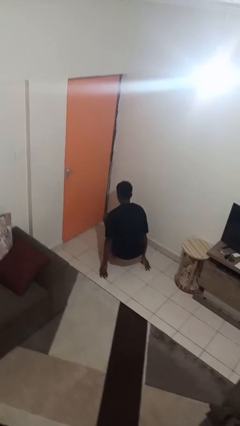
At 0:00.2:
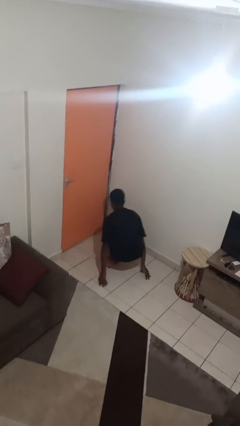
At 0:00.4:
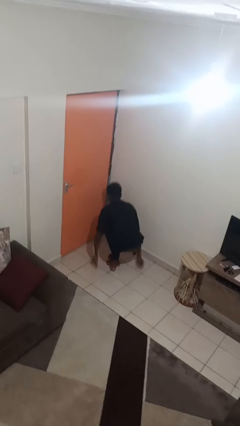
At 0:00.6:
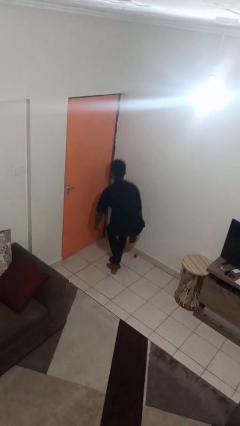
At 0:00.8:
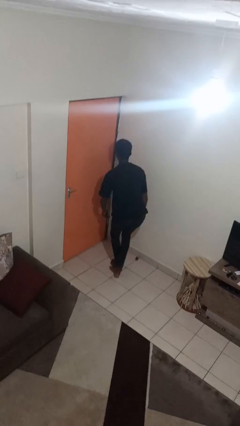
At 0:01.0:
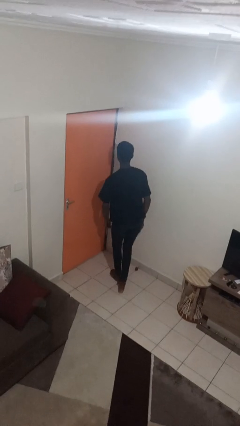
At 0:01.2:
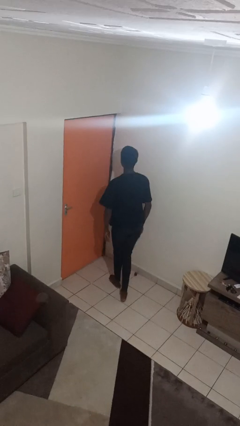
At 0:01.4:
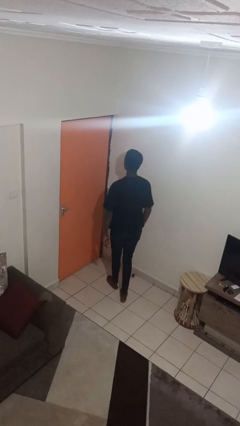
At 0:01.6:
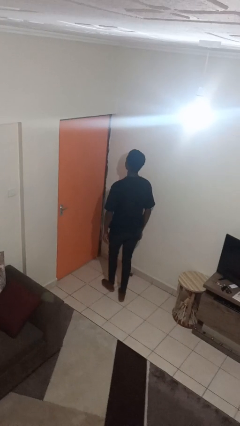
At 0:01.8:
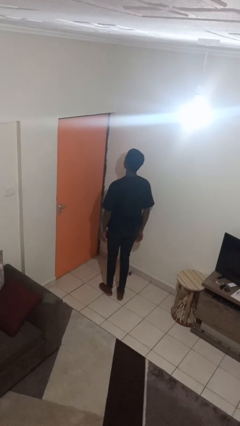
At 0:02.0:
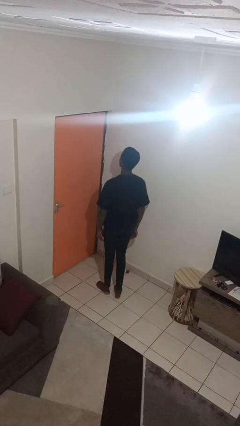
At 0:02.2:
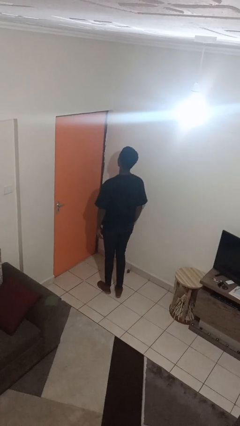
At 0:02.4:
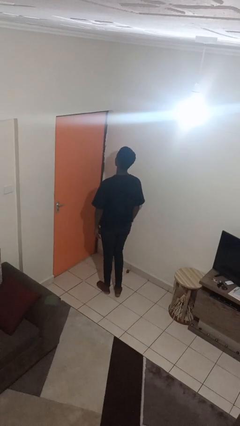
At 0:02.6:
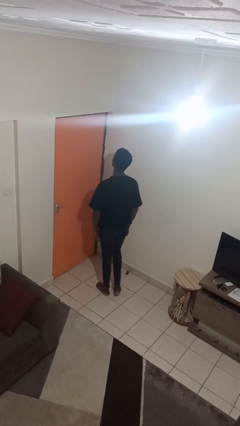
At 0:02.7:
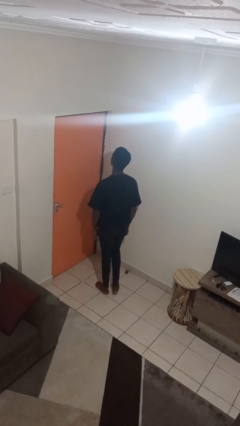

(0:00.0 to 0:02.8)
person stands up from floor

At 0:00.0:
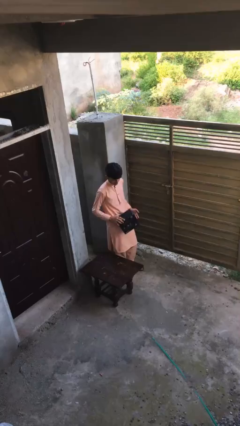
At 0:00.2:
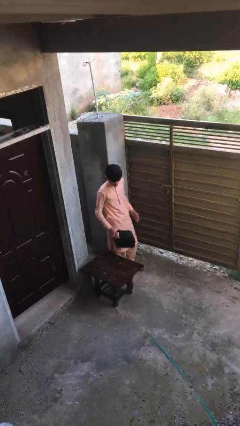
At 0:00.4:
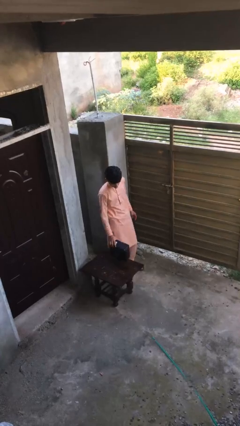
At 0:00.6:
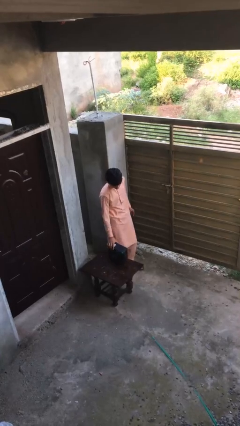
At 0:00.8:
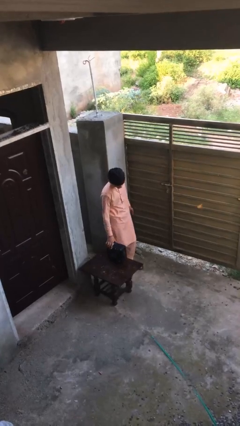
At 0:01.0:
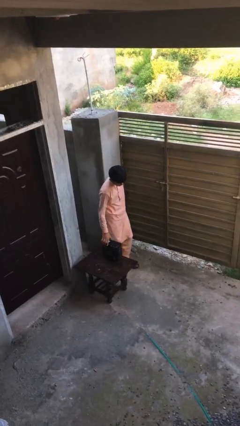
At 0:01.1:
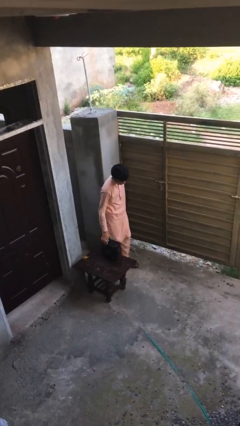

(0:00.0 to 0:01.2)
person puts down object on table

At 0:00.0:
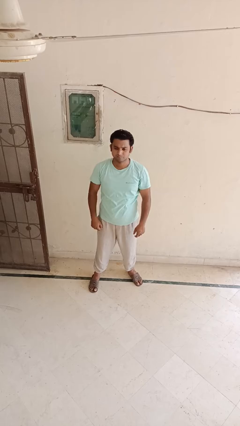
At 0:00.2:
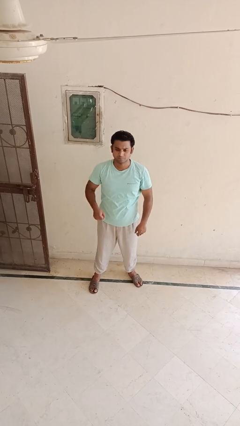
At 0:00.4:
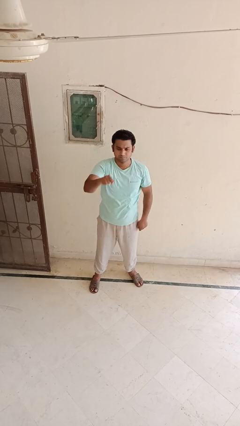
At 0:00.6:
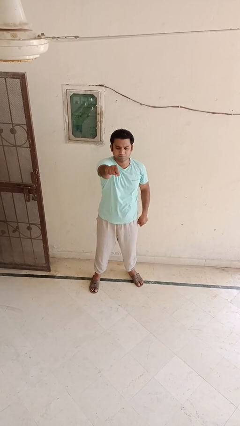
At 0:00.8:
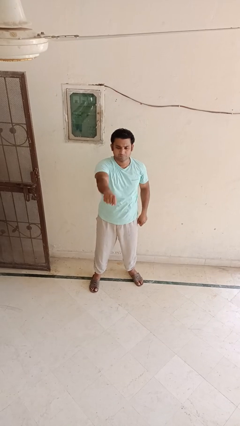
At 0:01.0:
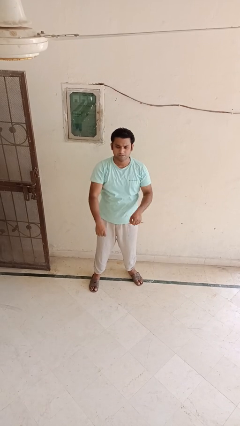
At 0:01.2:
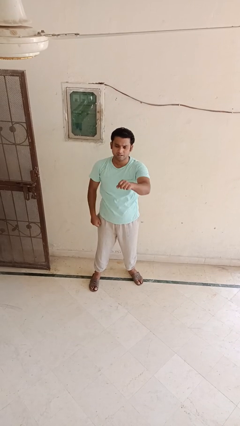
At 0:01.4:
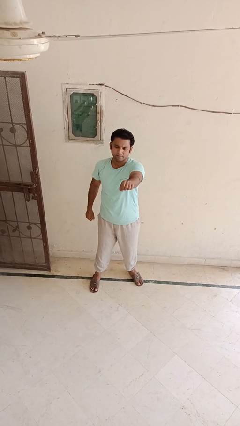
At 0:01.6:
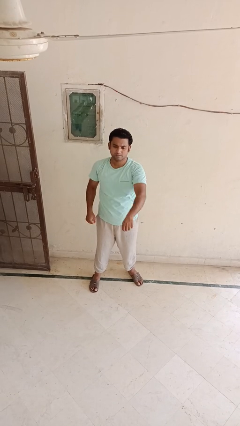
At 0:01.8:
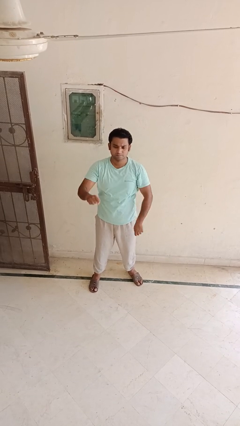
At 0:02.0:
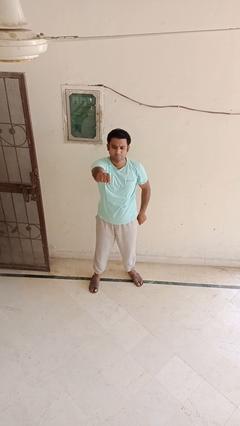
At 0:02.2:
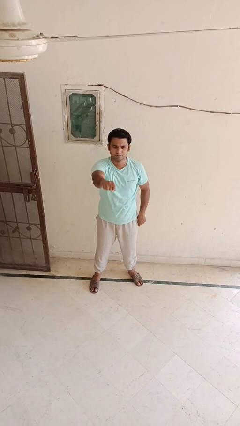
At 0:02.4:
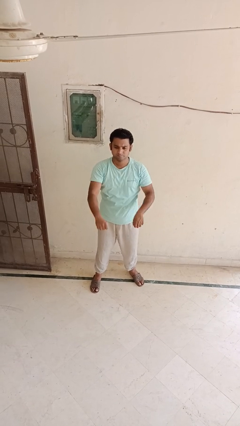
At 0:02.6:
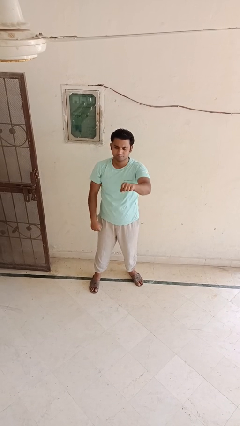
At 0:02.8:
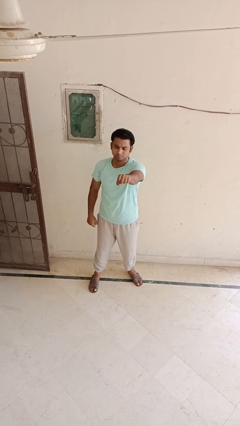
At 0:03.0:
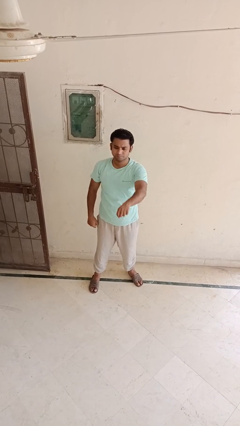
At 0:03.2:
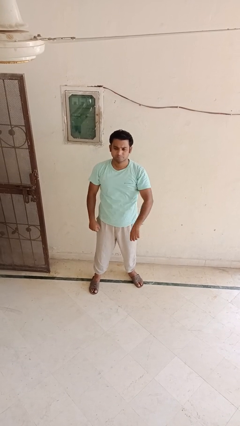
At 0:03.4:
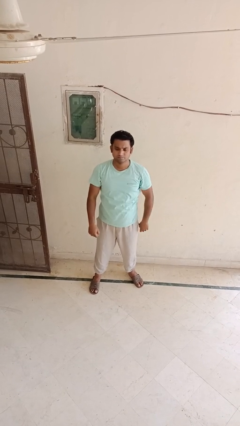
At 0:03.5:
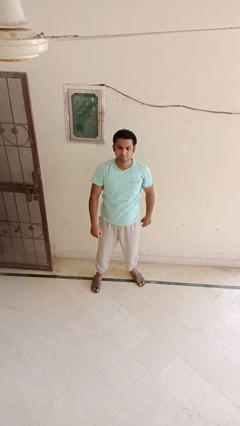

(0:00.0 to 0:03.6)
person punches

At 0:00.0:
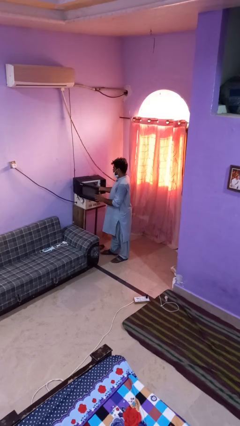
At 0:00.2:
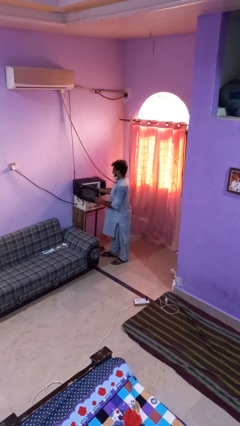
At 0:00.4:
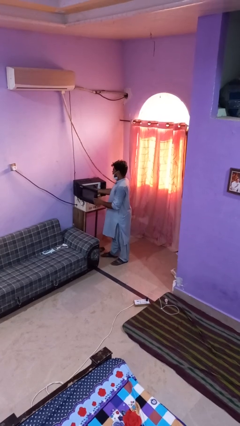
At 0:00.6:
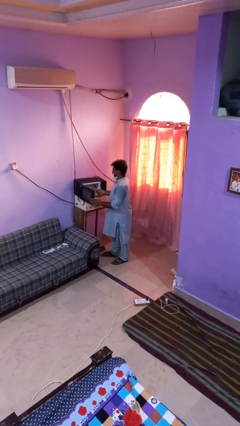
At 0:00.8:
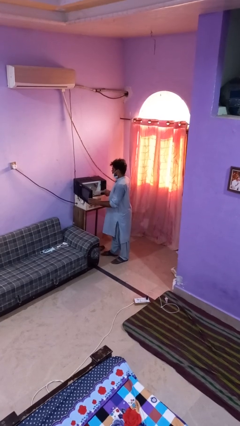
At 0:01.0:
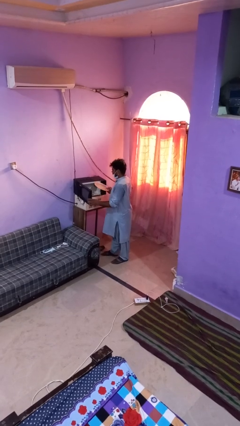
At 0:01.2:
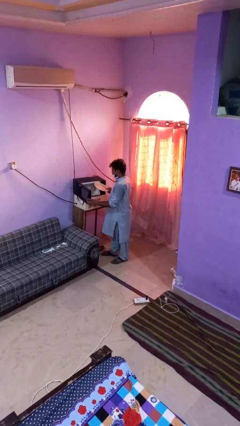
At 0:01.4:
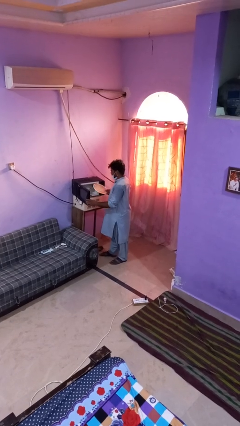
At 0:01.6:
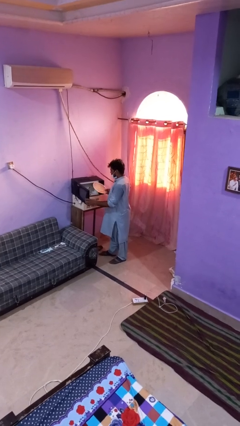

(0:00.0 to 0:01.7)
person takes object from oven

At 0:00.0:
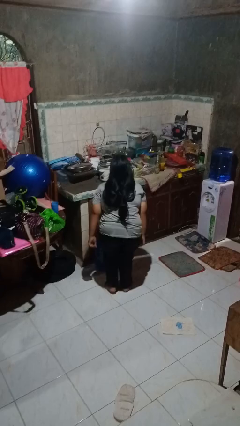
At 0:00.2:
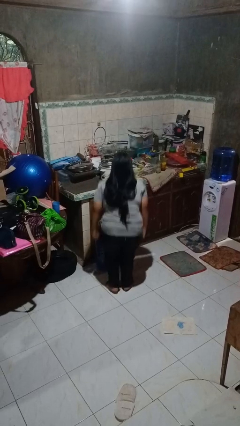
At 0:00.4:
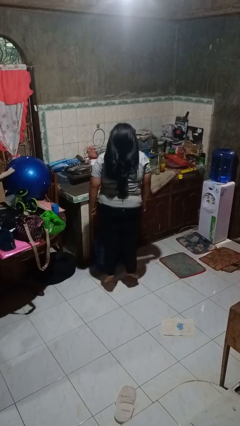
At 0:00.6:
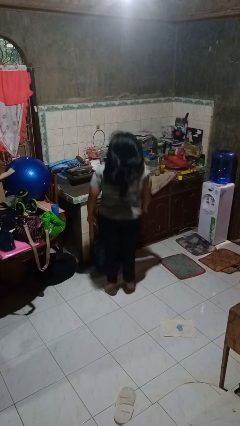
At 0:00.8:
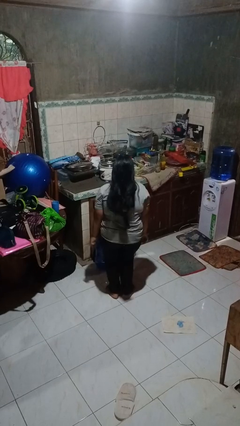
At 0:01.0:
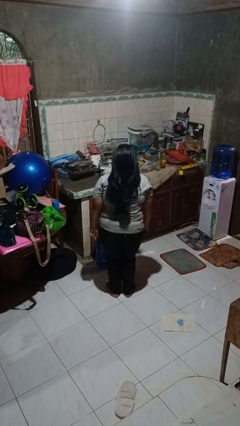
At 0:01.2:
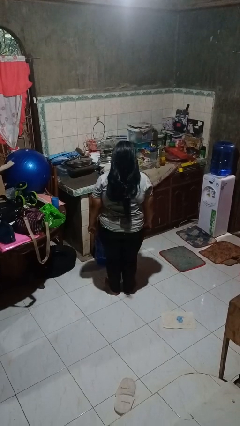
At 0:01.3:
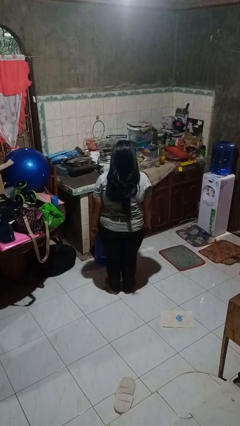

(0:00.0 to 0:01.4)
person jumps

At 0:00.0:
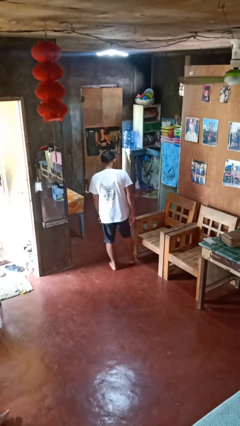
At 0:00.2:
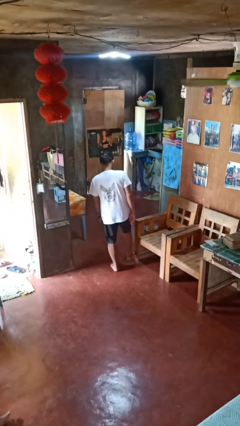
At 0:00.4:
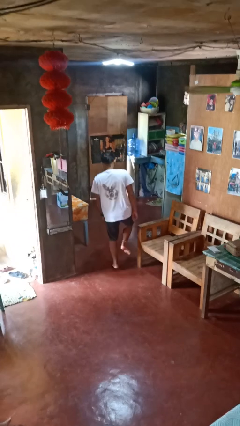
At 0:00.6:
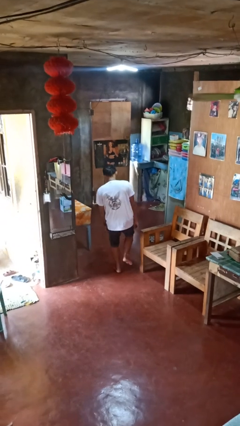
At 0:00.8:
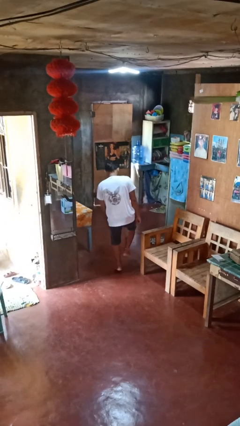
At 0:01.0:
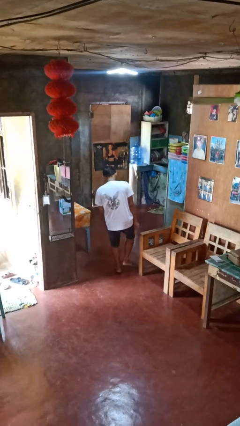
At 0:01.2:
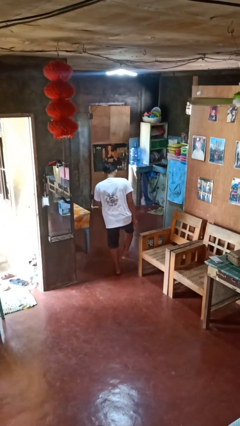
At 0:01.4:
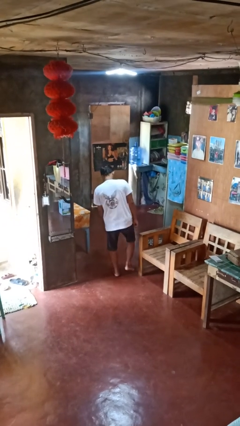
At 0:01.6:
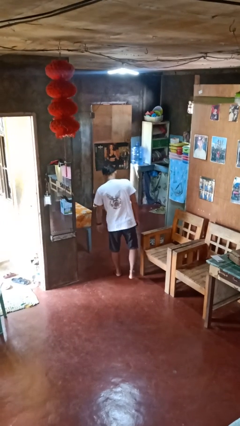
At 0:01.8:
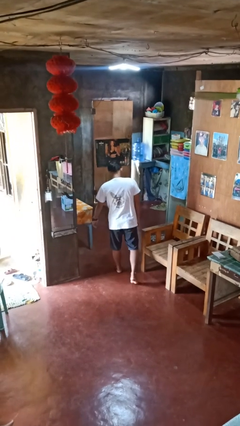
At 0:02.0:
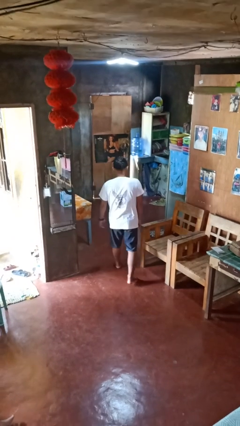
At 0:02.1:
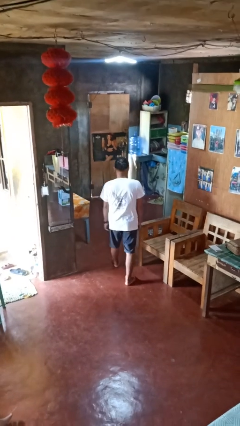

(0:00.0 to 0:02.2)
person stubs toe

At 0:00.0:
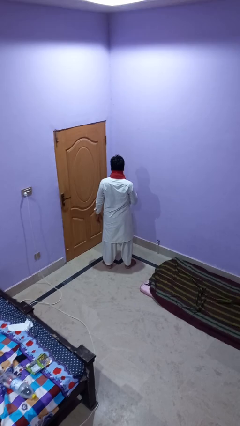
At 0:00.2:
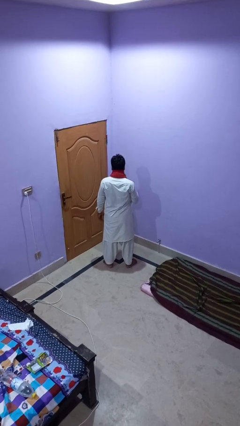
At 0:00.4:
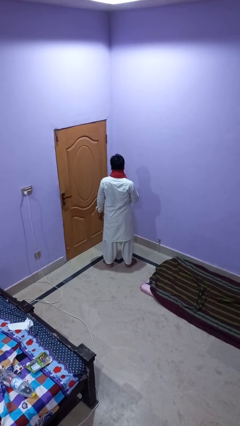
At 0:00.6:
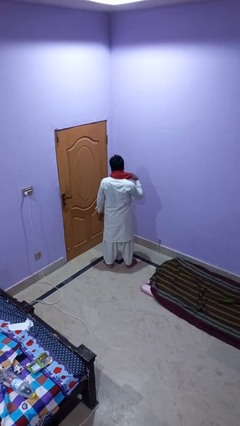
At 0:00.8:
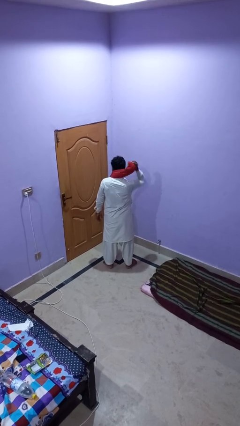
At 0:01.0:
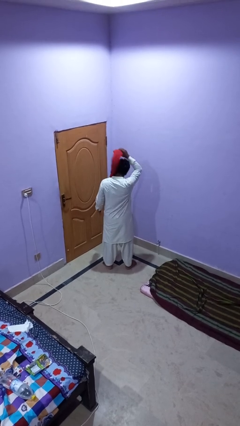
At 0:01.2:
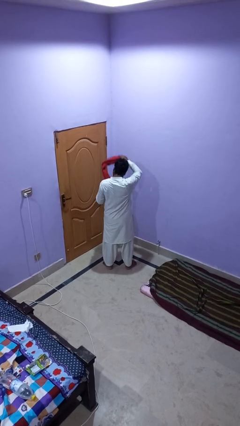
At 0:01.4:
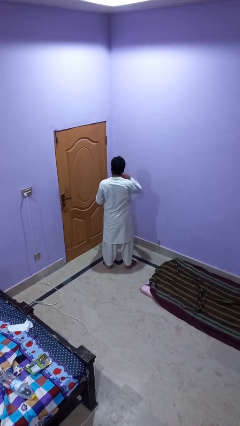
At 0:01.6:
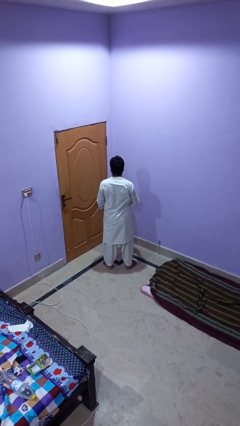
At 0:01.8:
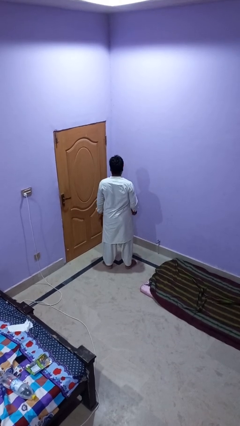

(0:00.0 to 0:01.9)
person takes off scarf

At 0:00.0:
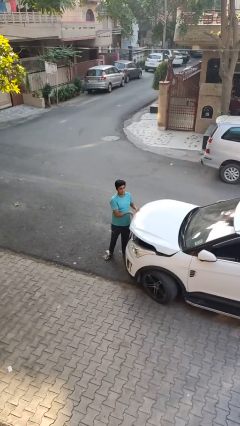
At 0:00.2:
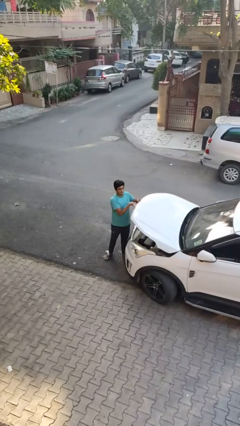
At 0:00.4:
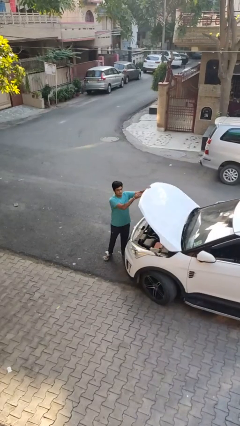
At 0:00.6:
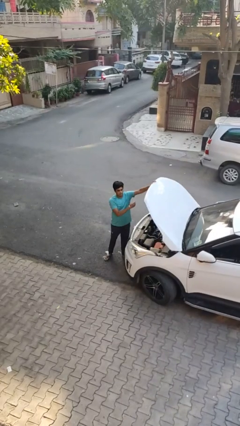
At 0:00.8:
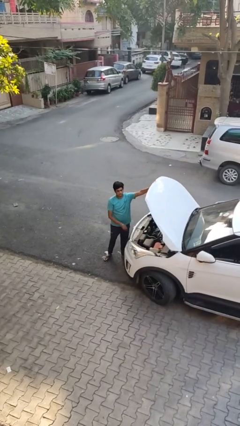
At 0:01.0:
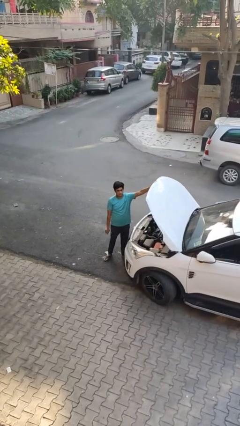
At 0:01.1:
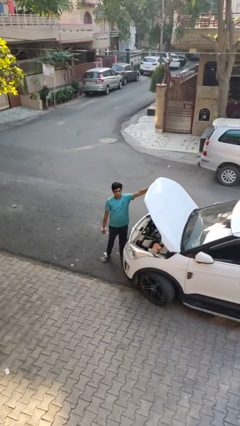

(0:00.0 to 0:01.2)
person opens car hood

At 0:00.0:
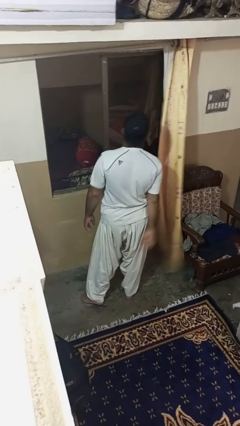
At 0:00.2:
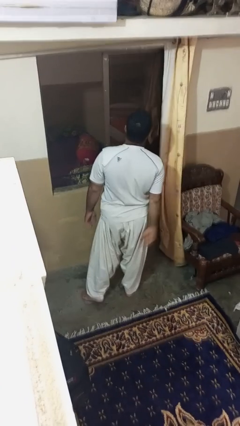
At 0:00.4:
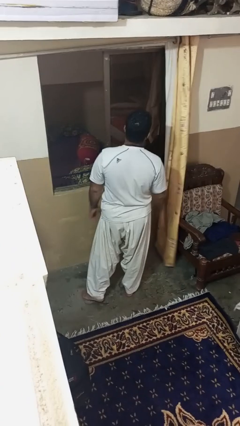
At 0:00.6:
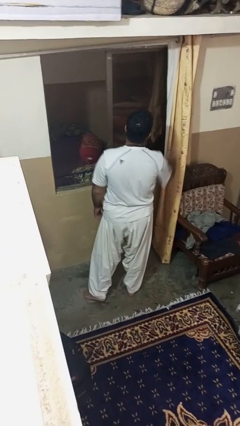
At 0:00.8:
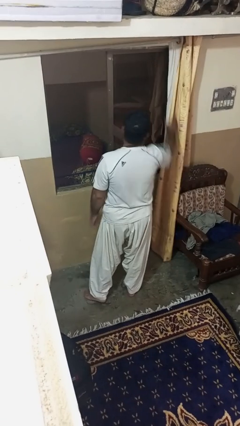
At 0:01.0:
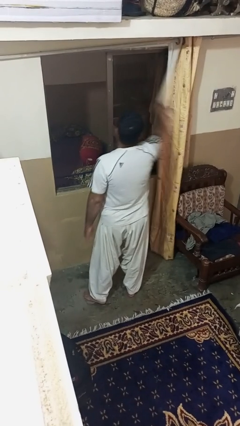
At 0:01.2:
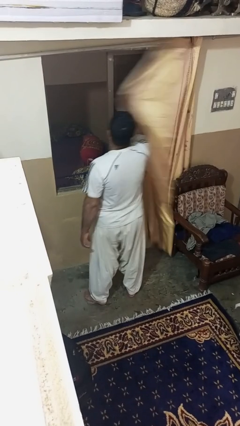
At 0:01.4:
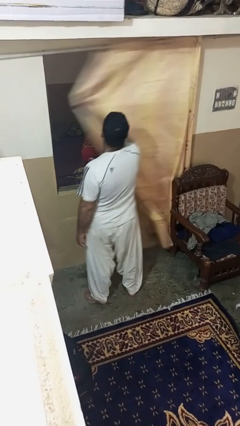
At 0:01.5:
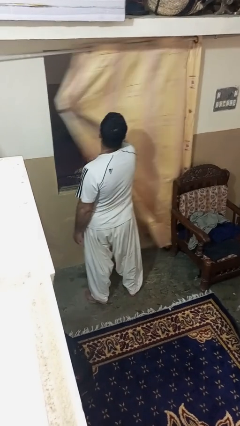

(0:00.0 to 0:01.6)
person closes curtains
